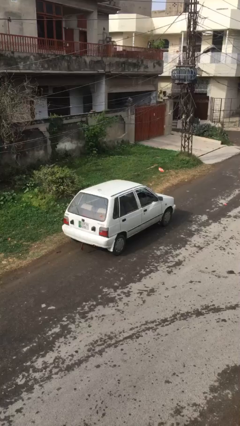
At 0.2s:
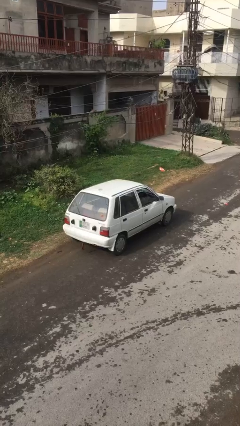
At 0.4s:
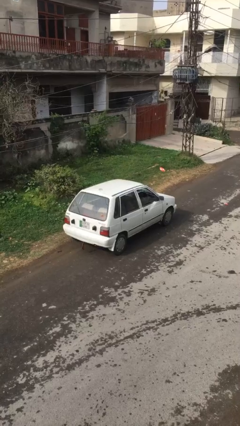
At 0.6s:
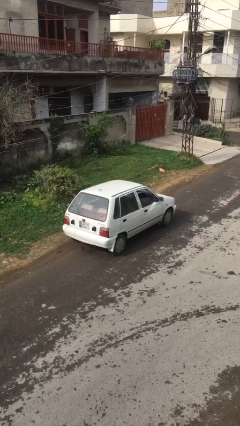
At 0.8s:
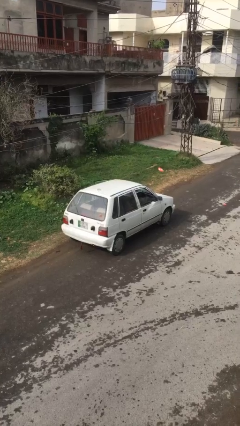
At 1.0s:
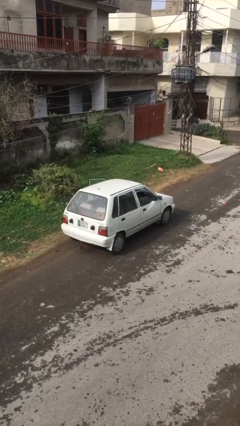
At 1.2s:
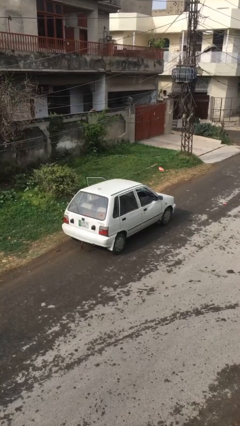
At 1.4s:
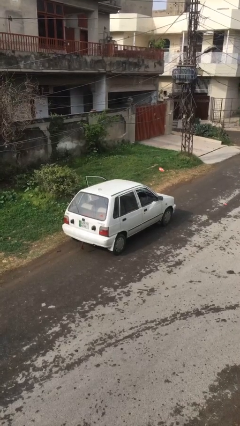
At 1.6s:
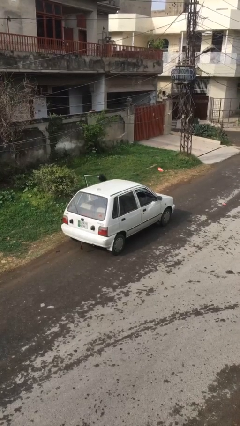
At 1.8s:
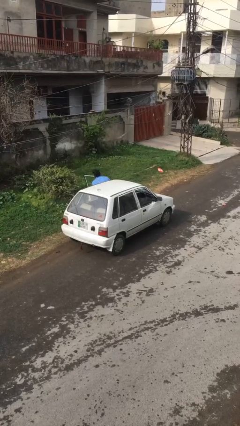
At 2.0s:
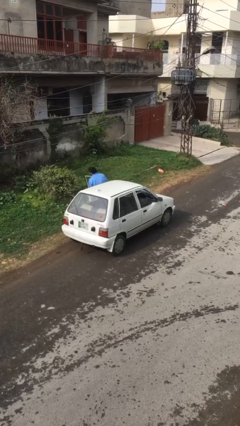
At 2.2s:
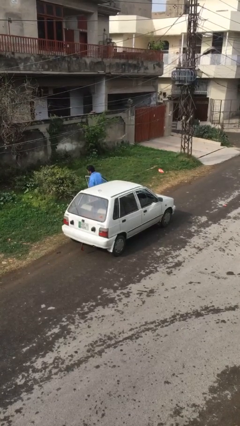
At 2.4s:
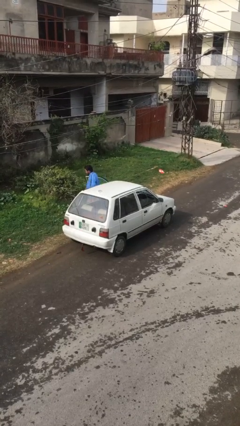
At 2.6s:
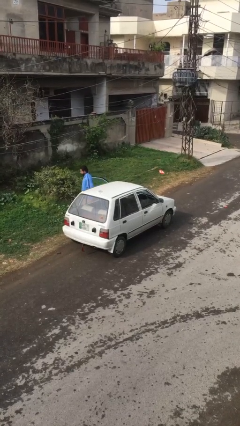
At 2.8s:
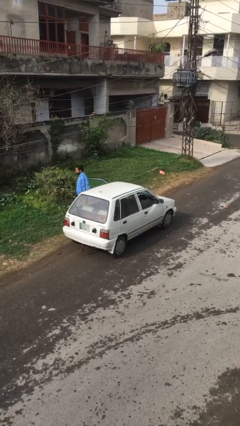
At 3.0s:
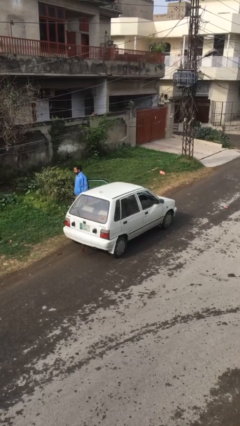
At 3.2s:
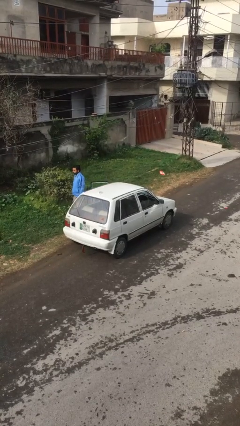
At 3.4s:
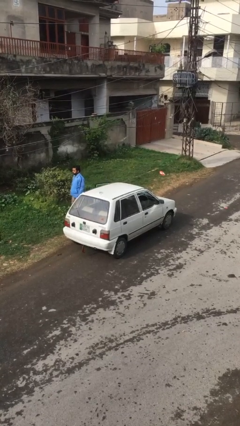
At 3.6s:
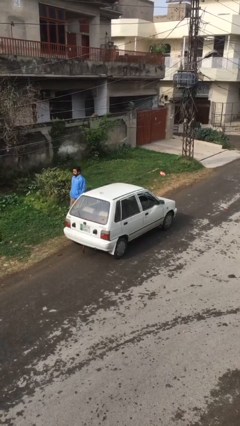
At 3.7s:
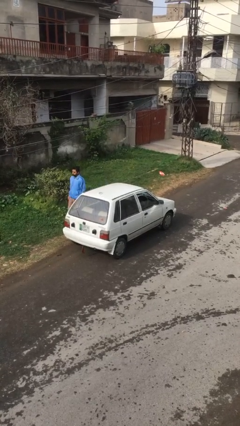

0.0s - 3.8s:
car drops off person

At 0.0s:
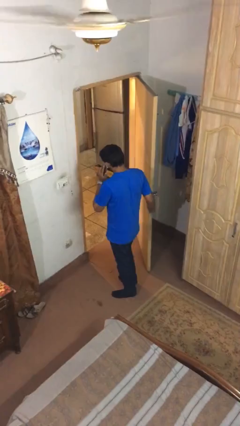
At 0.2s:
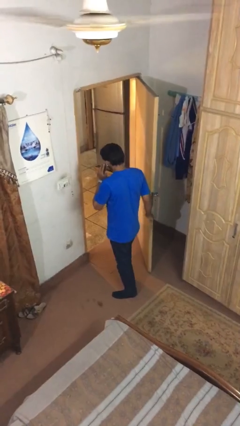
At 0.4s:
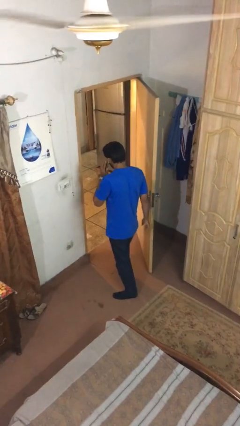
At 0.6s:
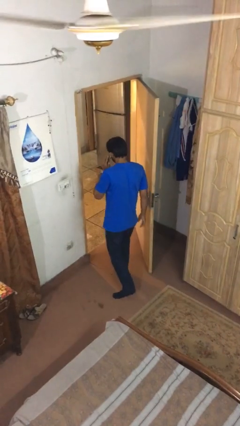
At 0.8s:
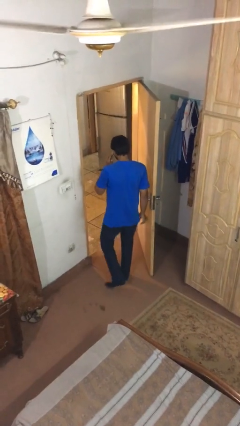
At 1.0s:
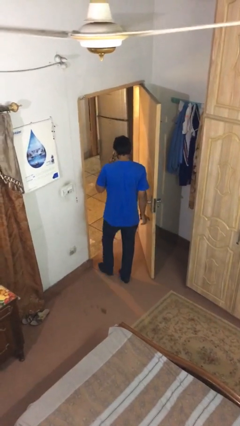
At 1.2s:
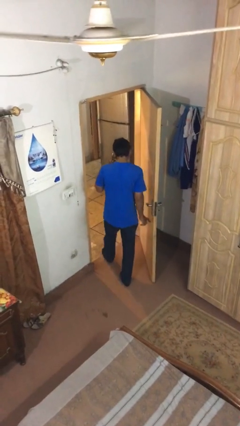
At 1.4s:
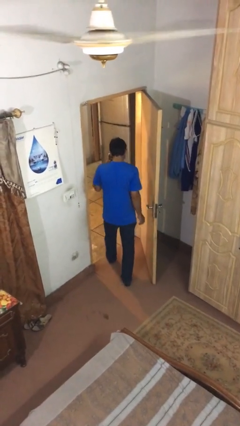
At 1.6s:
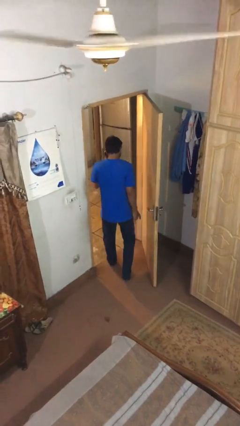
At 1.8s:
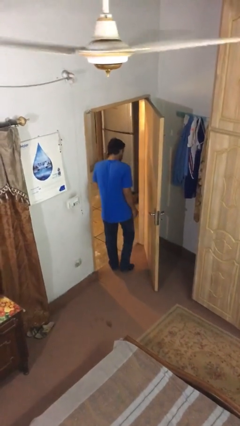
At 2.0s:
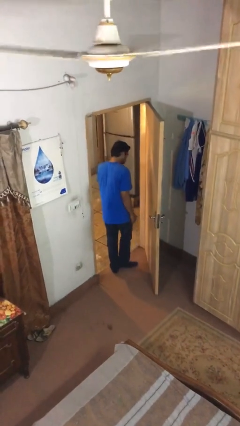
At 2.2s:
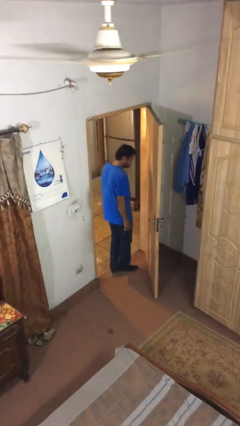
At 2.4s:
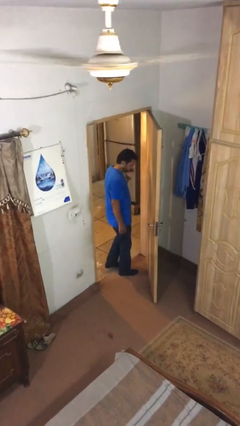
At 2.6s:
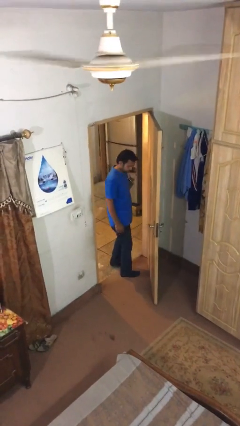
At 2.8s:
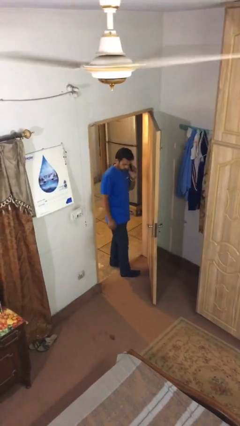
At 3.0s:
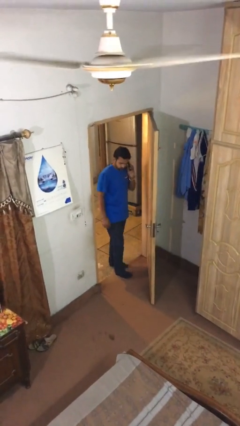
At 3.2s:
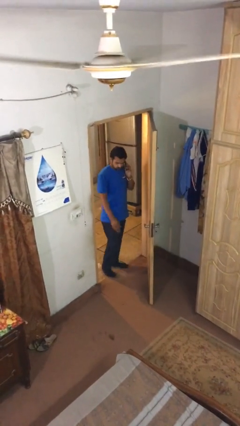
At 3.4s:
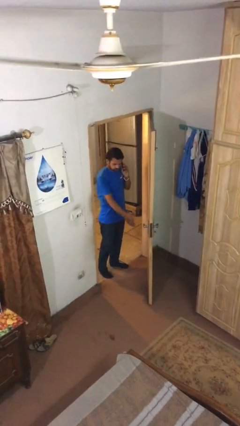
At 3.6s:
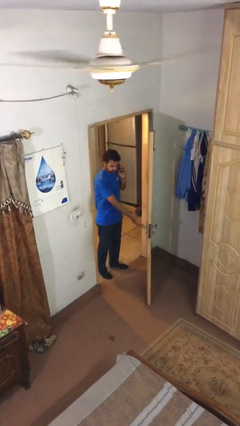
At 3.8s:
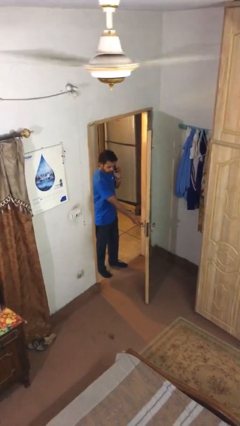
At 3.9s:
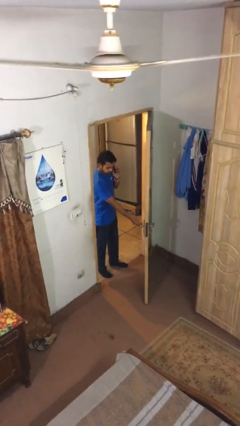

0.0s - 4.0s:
person exits scene through structure

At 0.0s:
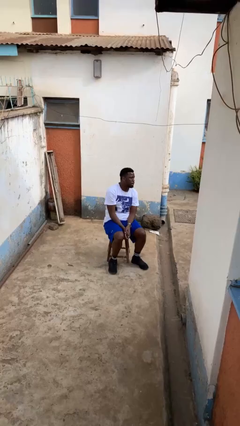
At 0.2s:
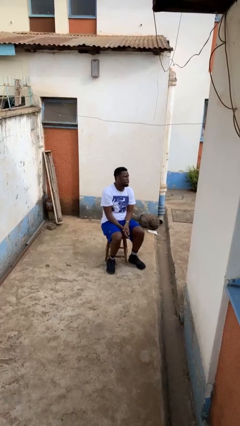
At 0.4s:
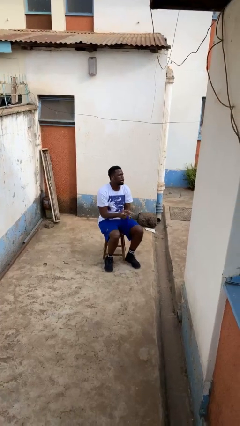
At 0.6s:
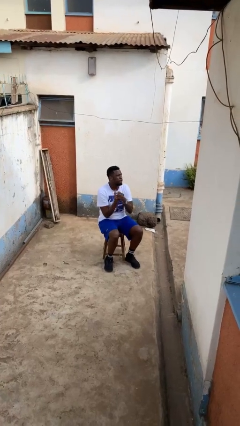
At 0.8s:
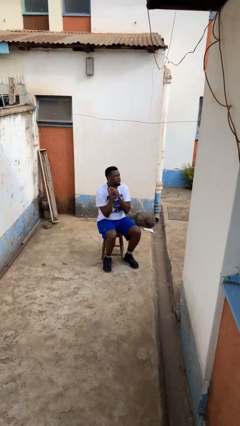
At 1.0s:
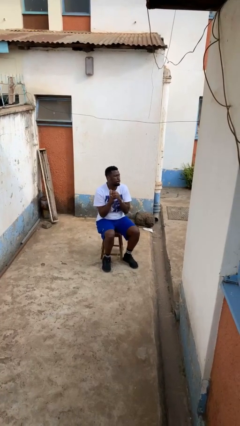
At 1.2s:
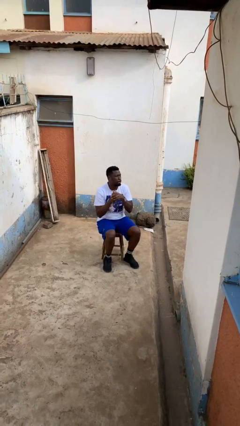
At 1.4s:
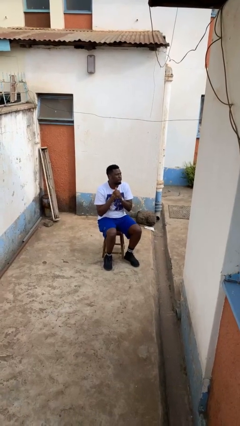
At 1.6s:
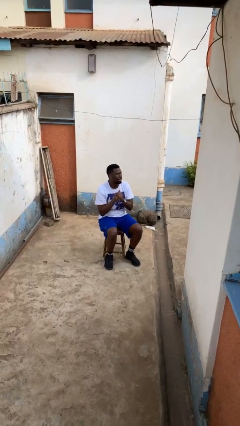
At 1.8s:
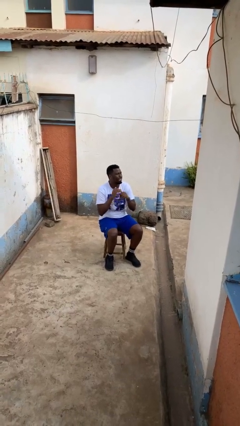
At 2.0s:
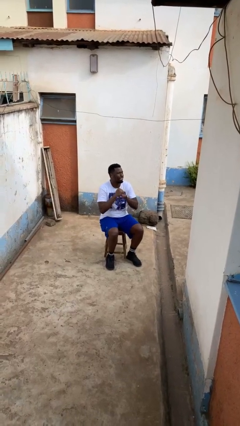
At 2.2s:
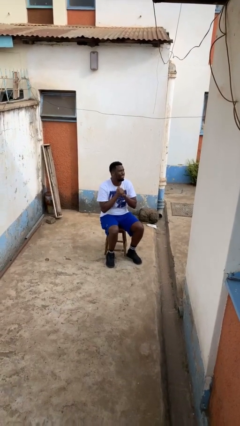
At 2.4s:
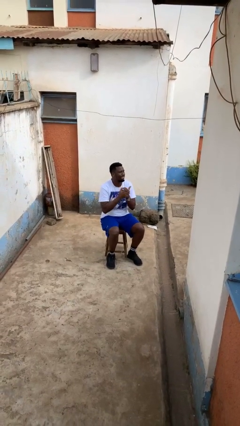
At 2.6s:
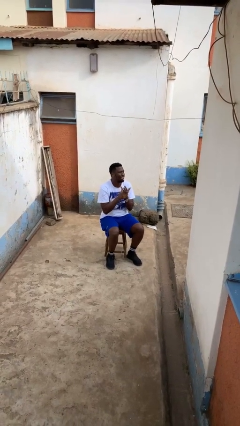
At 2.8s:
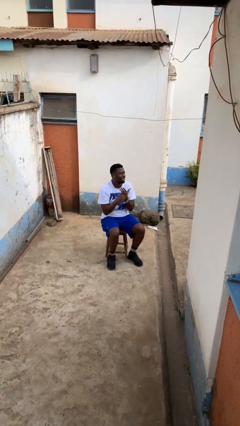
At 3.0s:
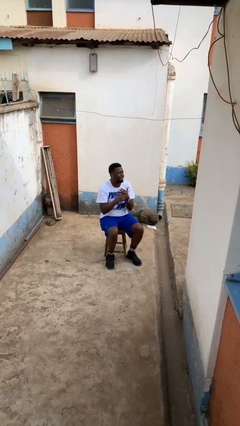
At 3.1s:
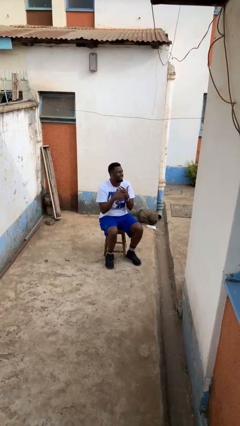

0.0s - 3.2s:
person cracks knuckles

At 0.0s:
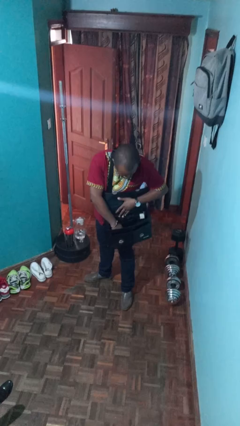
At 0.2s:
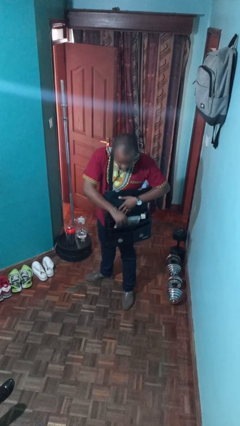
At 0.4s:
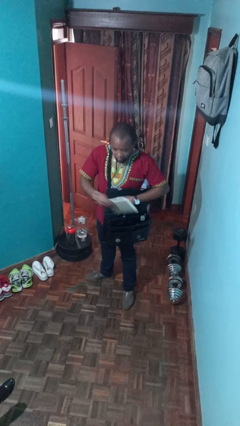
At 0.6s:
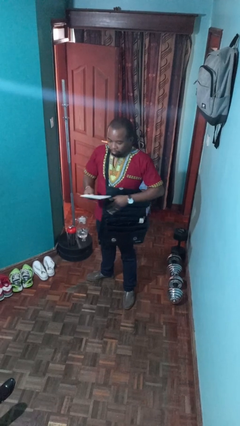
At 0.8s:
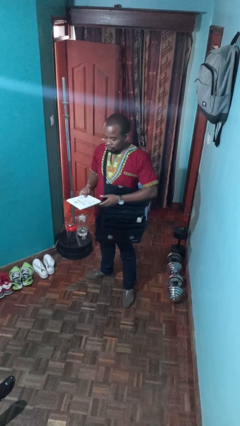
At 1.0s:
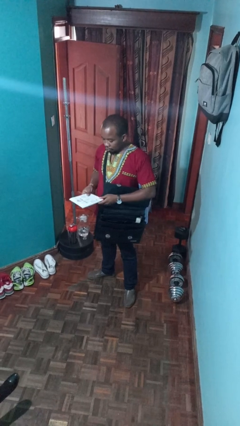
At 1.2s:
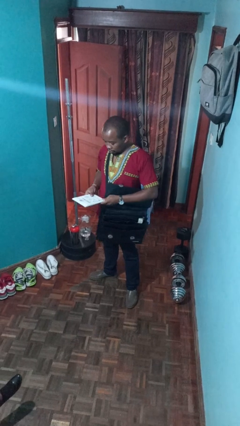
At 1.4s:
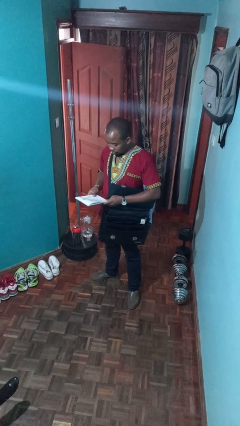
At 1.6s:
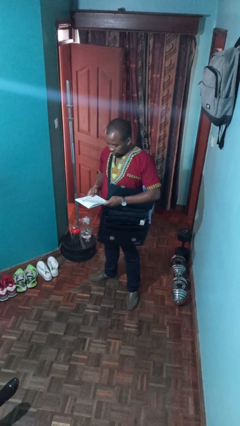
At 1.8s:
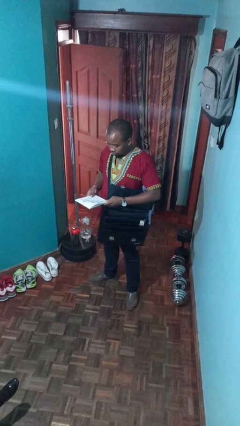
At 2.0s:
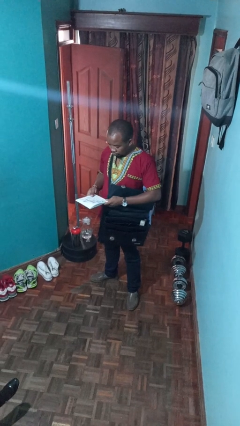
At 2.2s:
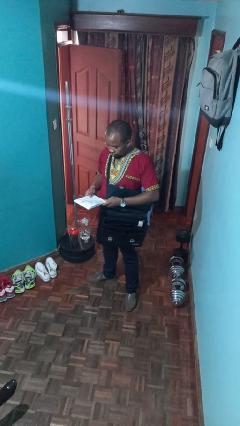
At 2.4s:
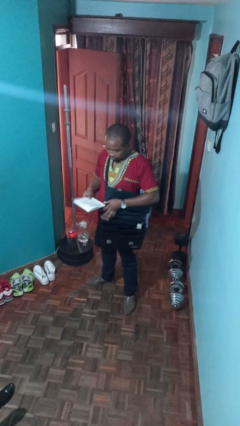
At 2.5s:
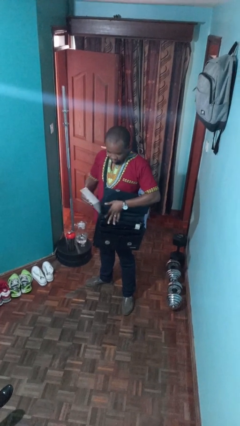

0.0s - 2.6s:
person takes object from purse

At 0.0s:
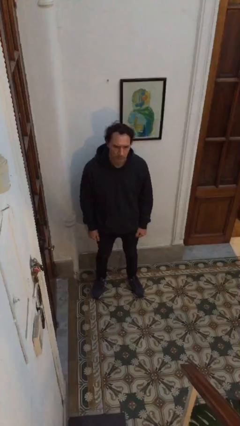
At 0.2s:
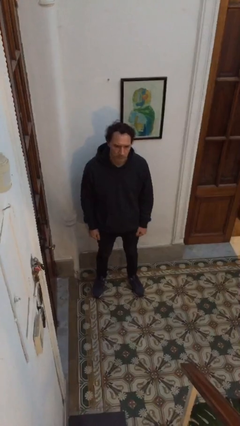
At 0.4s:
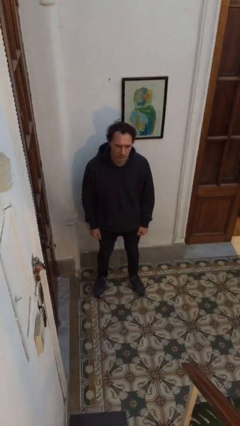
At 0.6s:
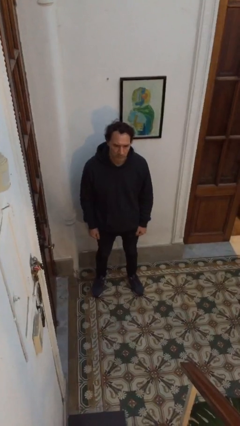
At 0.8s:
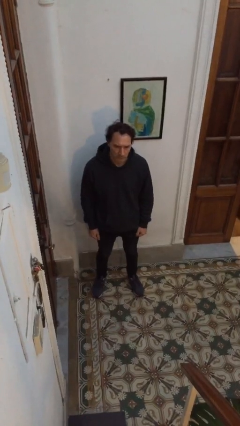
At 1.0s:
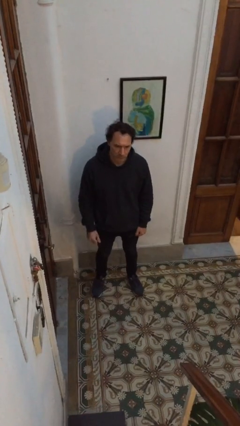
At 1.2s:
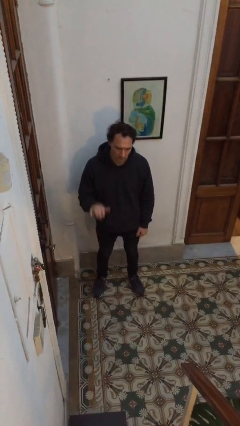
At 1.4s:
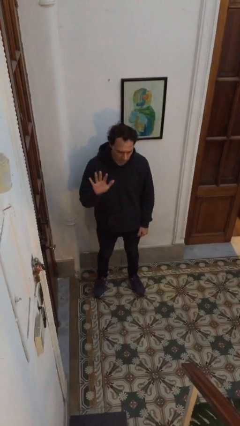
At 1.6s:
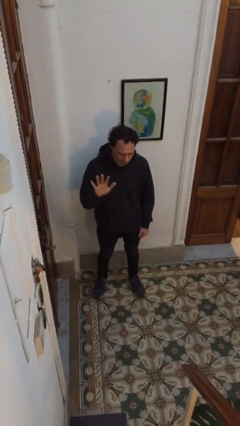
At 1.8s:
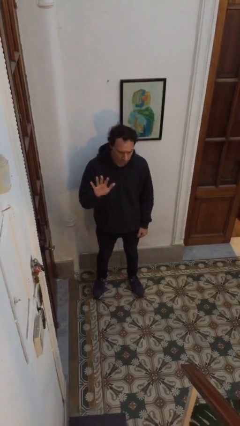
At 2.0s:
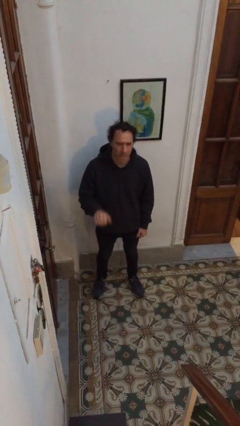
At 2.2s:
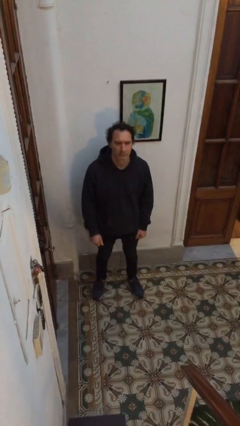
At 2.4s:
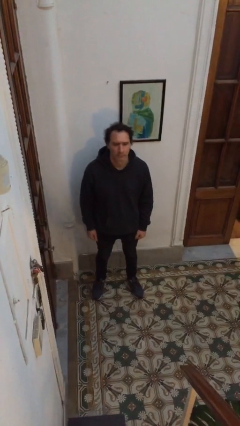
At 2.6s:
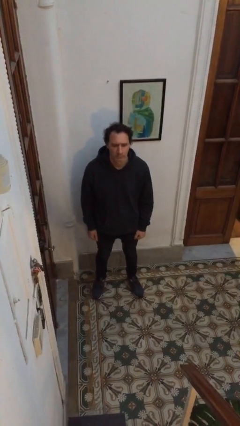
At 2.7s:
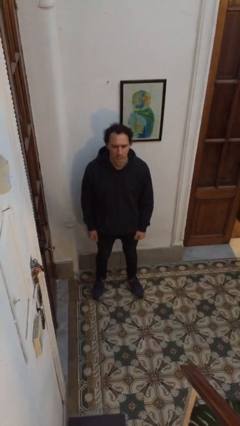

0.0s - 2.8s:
person gestures number five

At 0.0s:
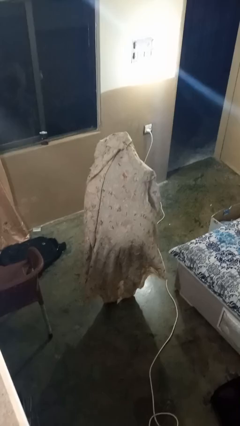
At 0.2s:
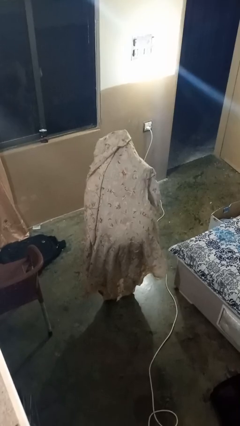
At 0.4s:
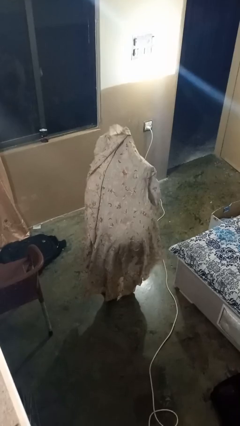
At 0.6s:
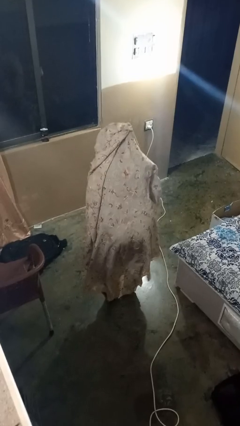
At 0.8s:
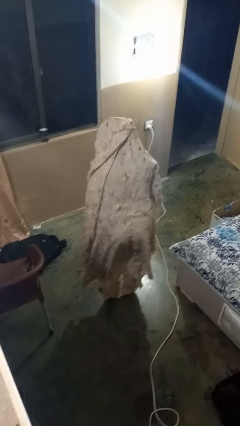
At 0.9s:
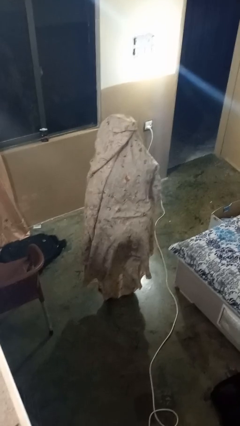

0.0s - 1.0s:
person bows

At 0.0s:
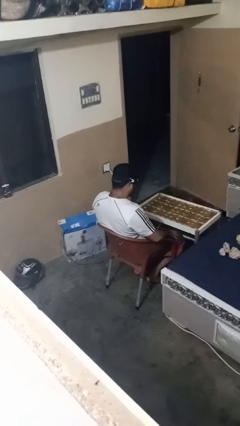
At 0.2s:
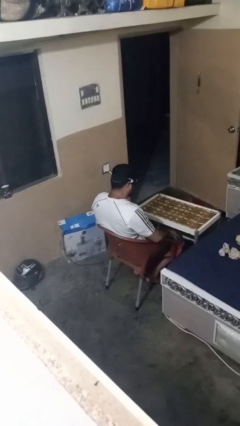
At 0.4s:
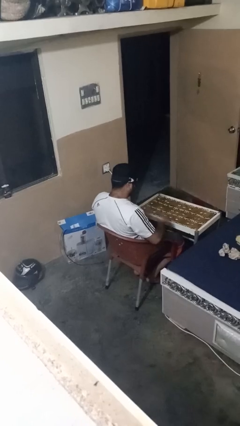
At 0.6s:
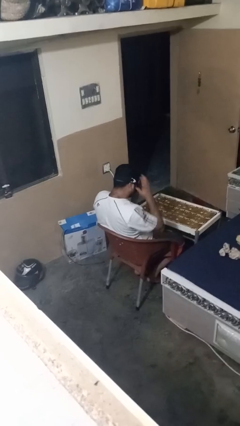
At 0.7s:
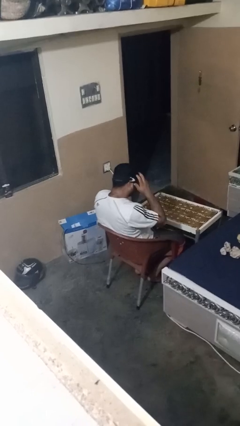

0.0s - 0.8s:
person takes off sunglasses
